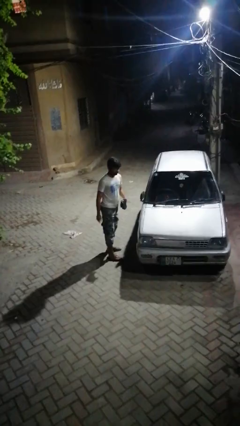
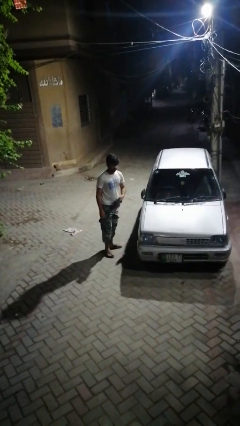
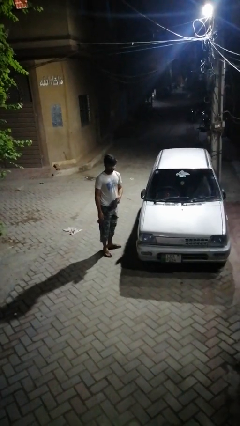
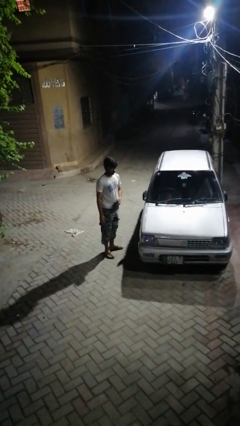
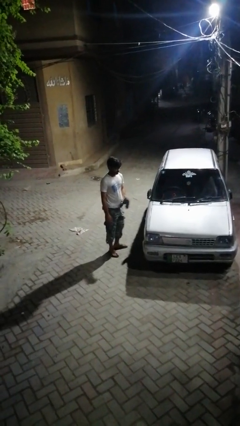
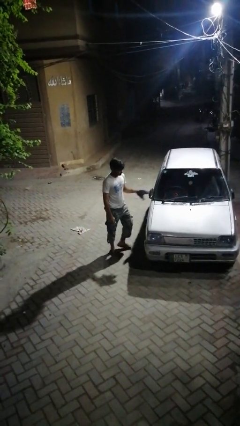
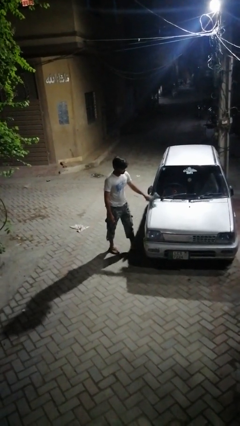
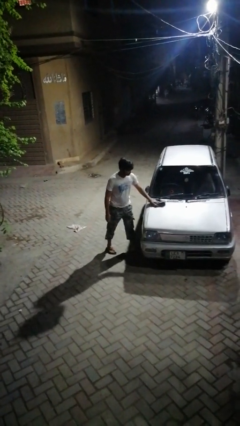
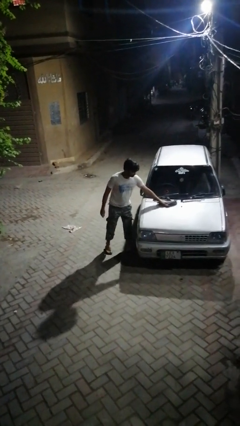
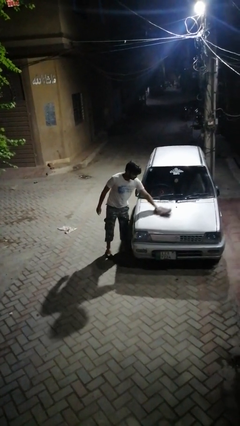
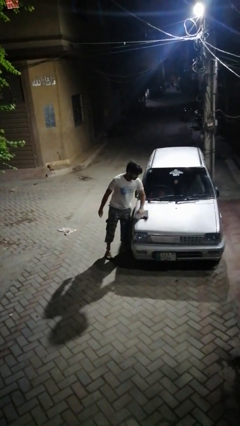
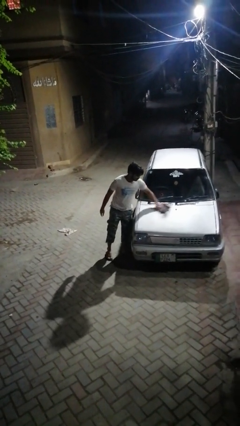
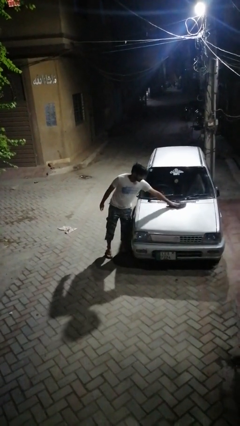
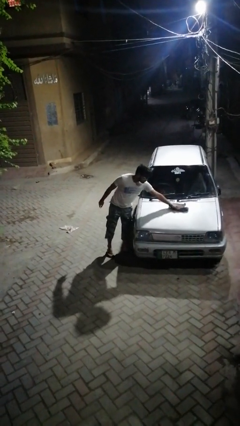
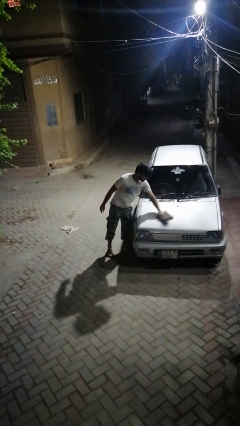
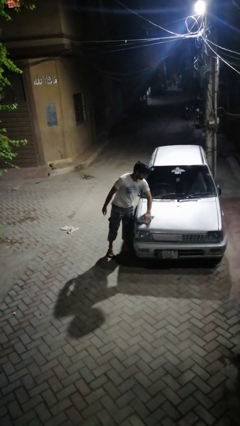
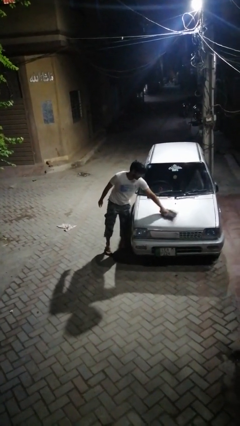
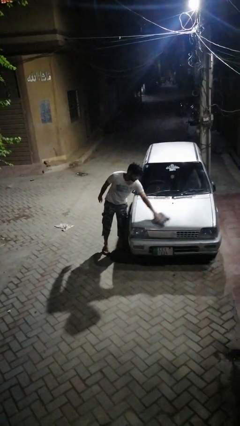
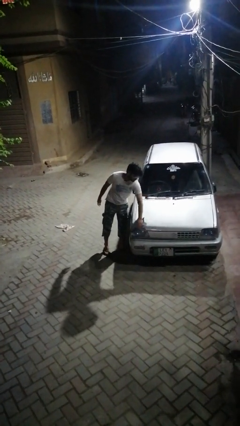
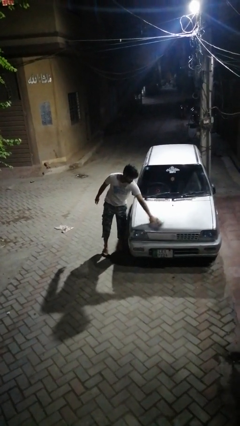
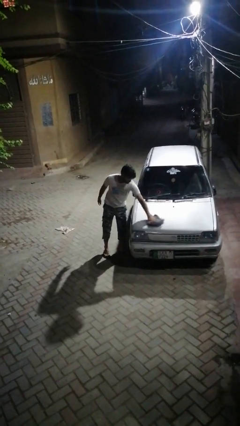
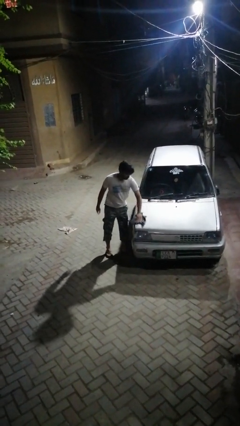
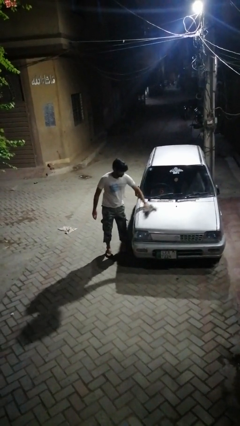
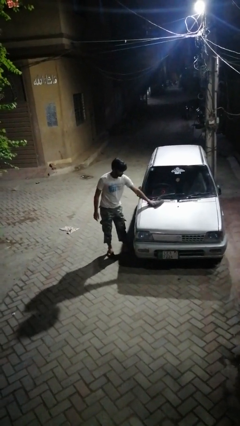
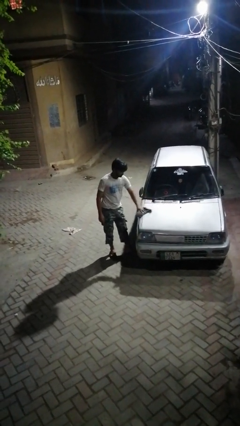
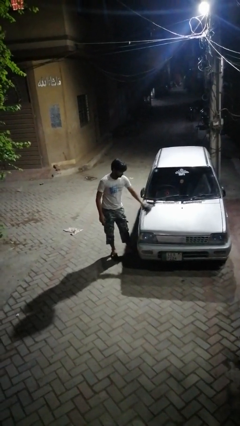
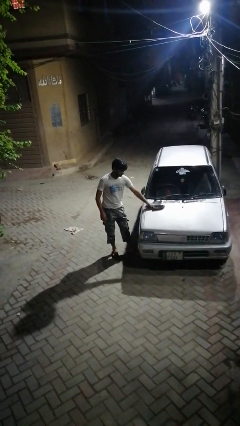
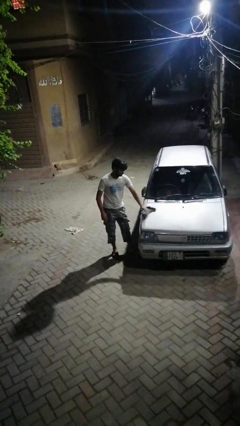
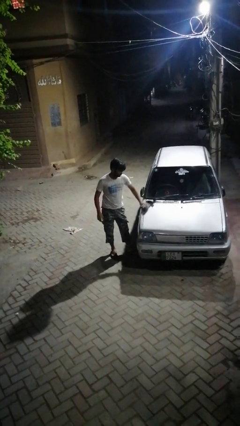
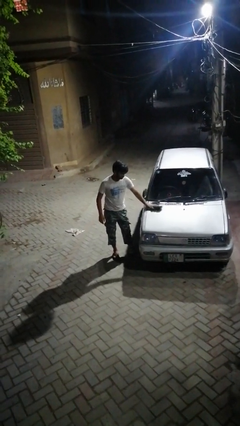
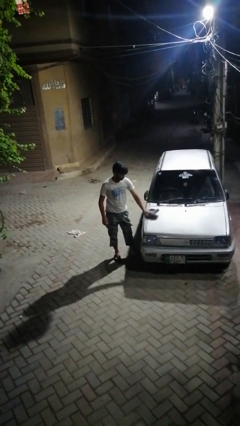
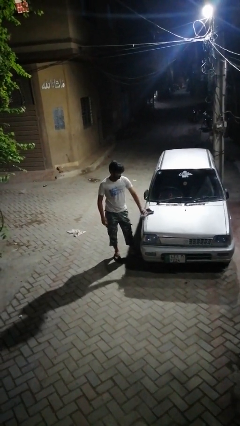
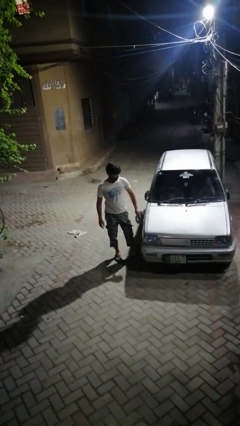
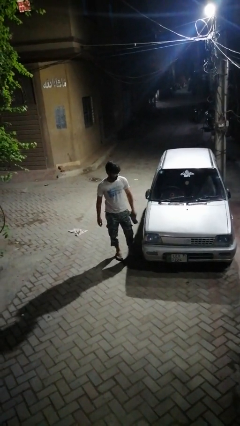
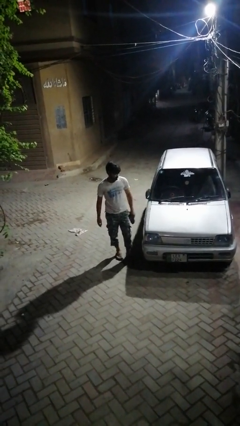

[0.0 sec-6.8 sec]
person polishes car with rag

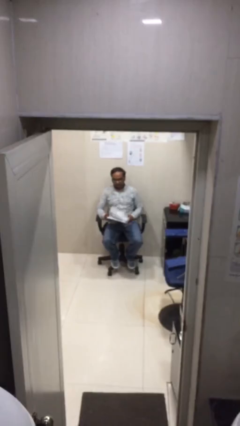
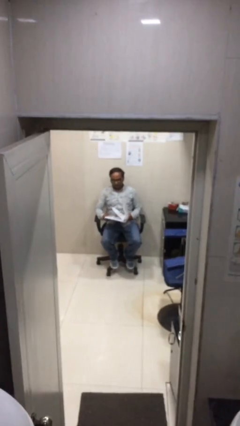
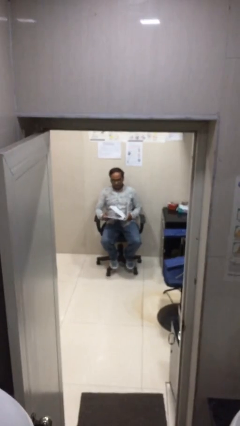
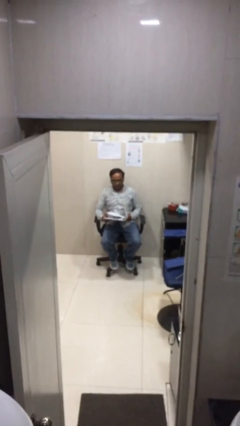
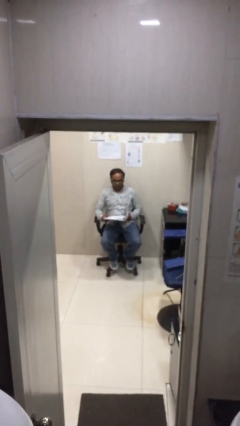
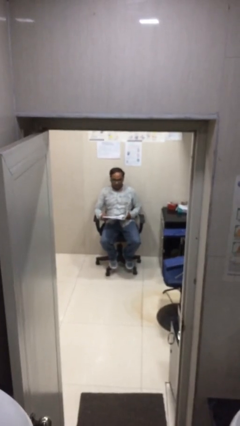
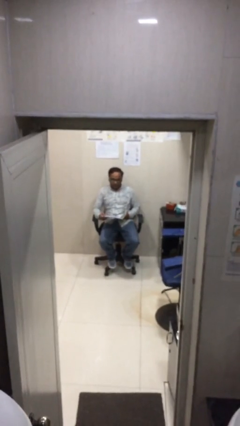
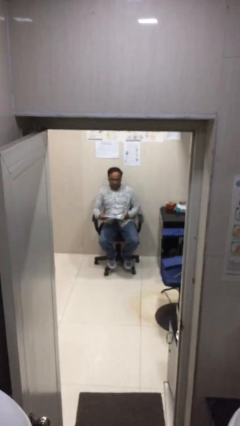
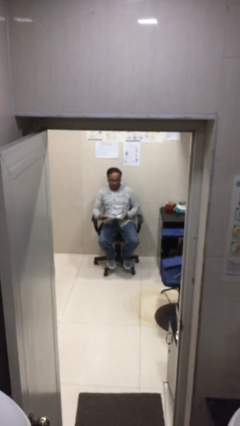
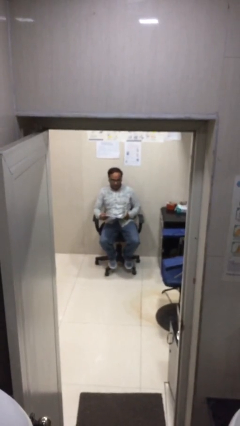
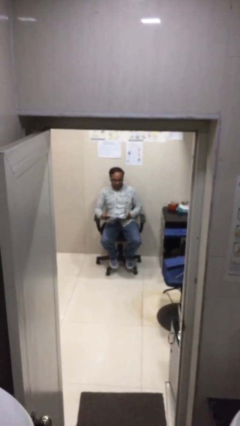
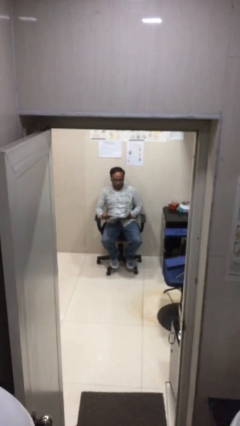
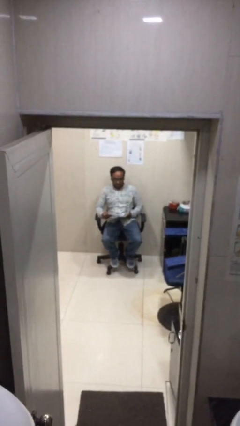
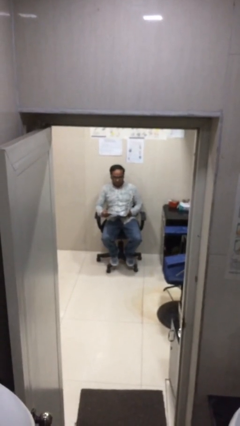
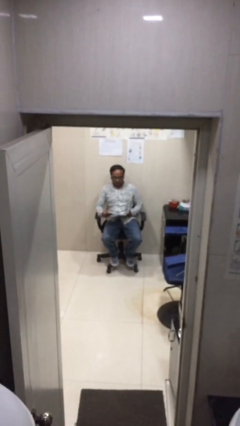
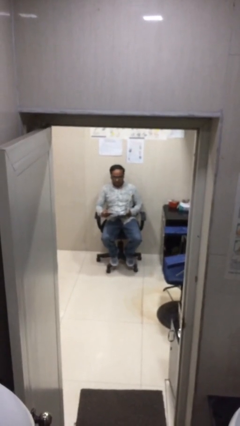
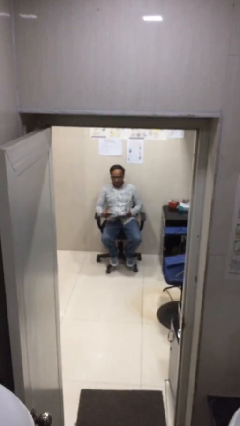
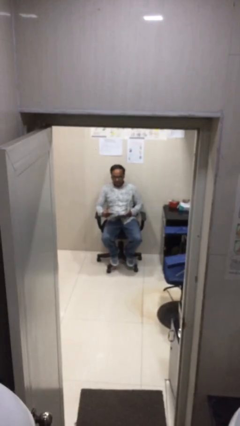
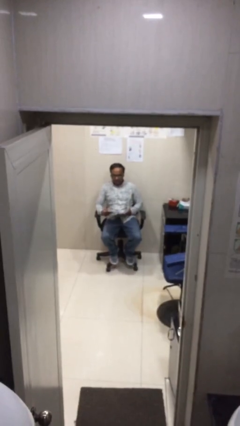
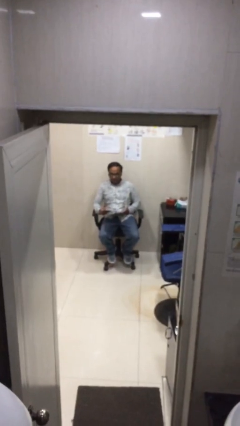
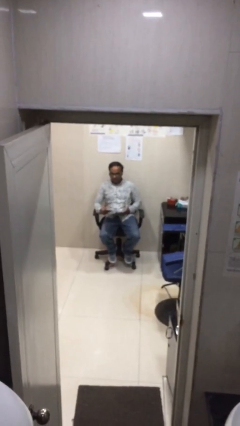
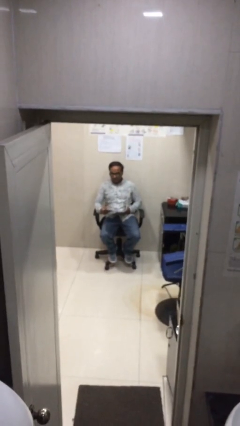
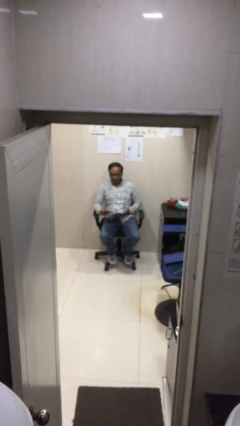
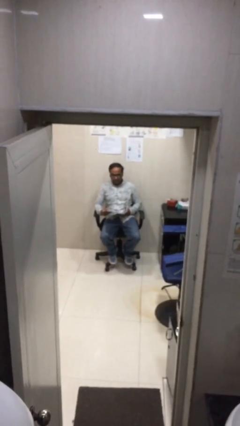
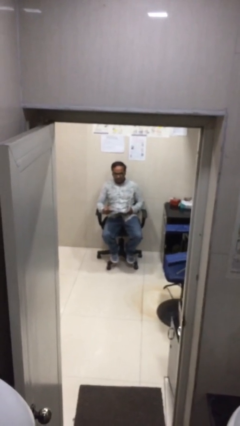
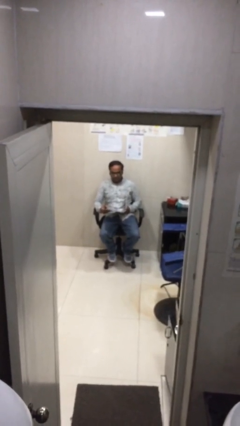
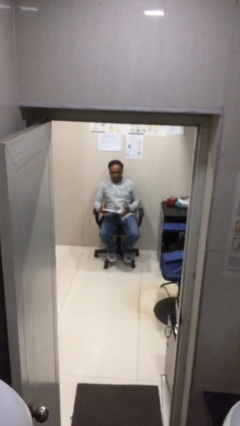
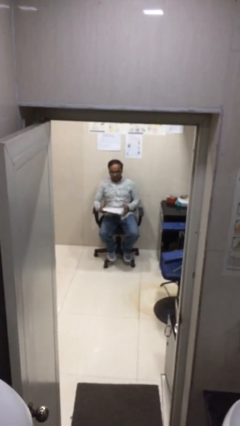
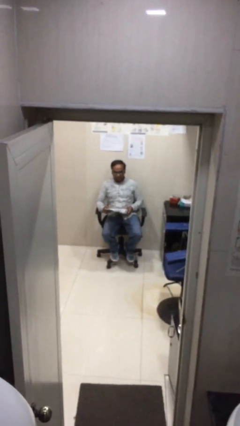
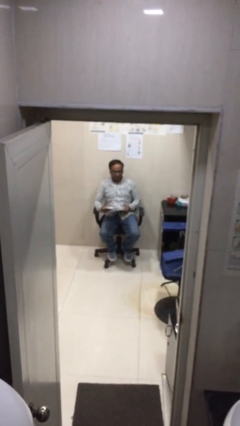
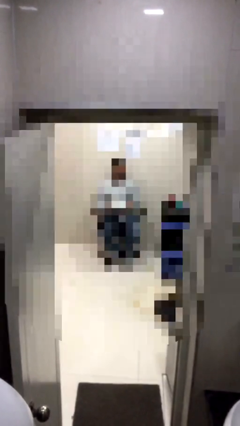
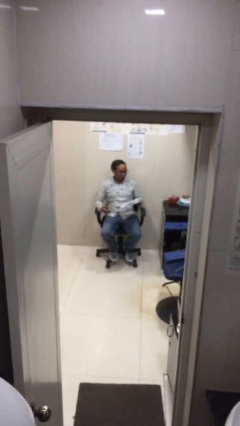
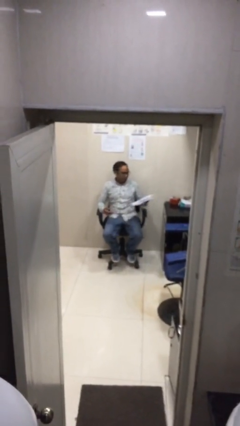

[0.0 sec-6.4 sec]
person reads document

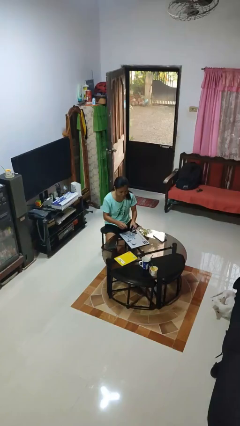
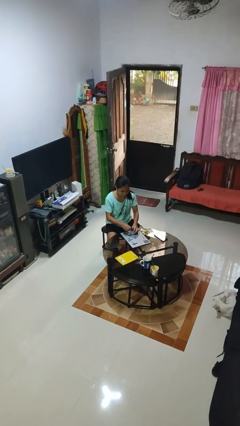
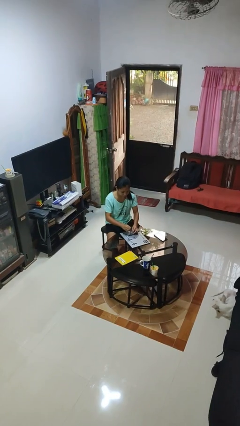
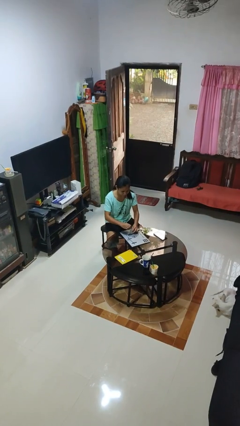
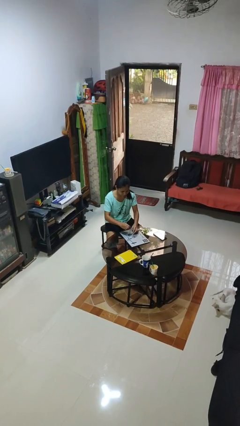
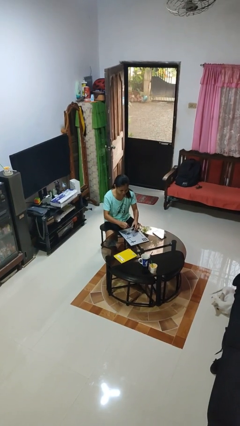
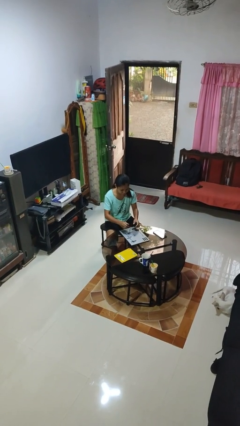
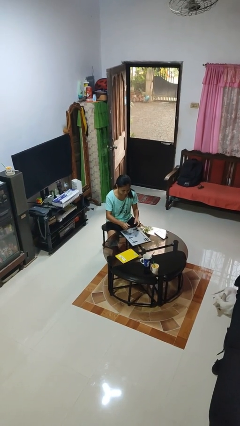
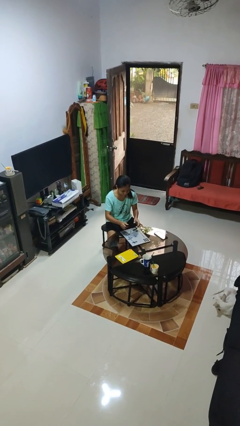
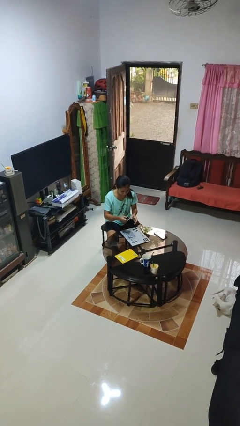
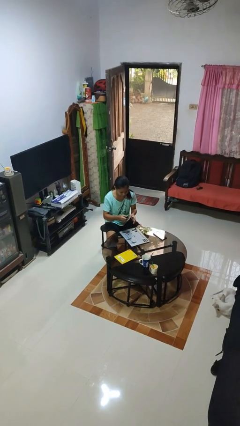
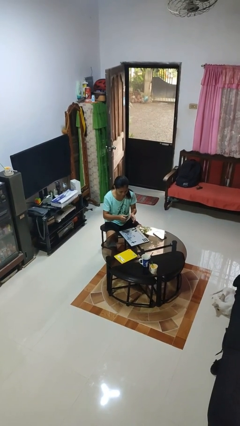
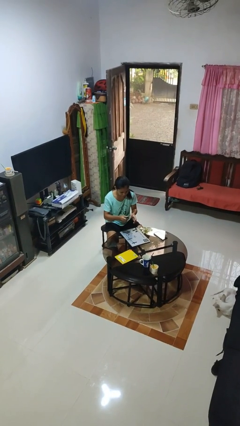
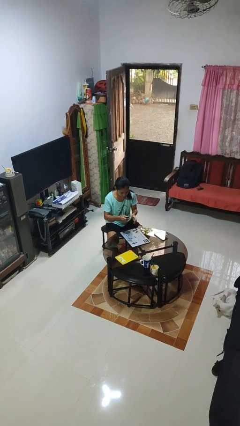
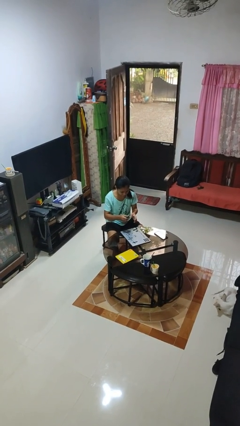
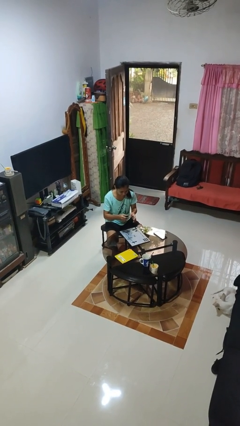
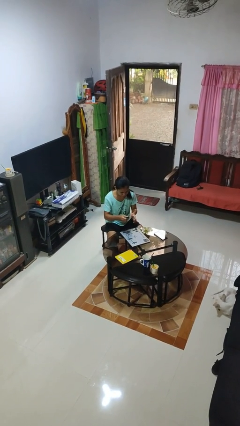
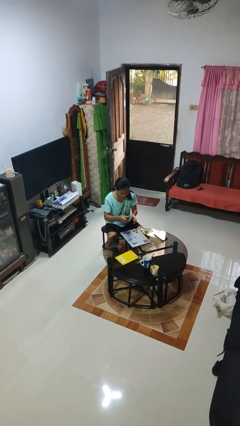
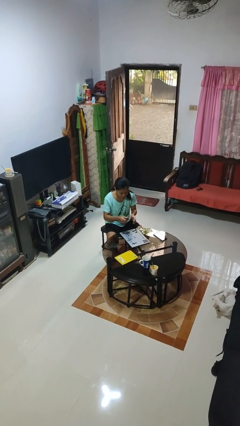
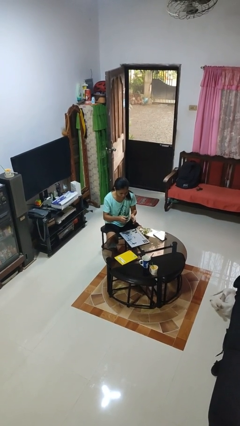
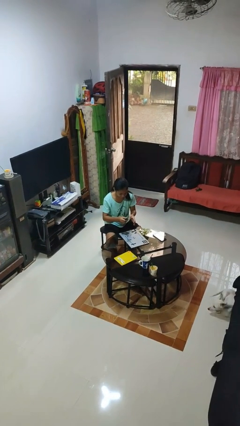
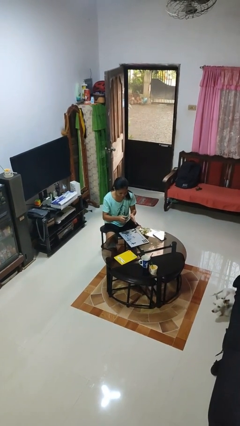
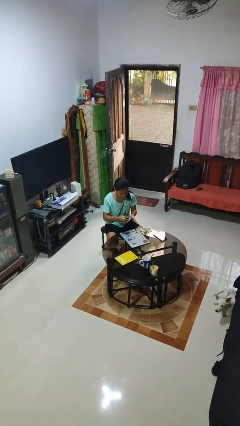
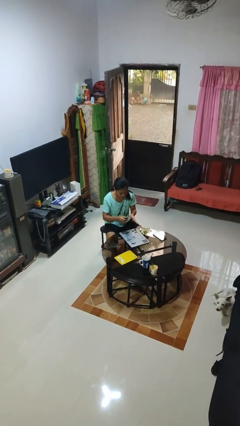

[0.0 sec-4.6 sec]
person paints fingernails
